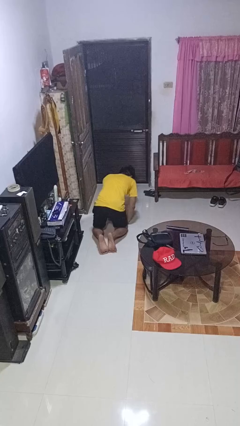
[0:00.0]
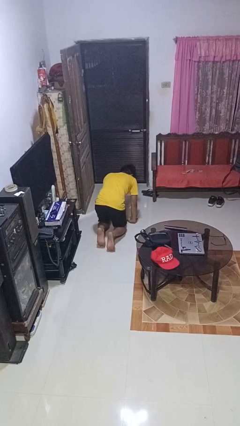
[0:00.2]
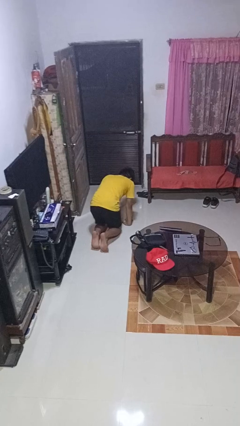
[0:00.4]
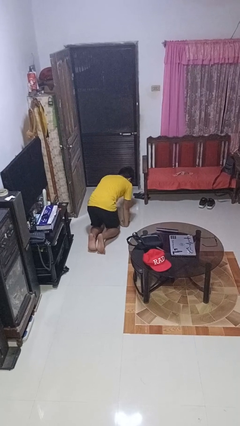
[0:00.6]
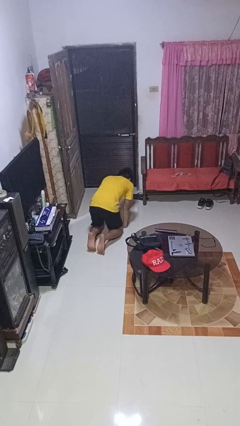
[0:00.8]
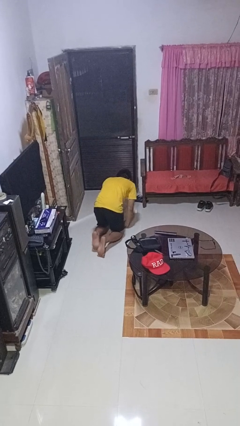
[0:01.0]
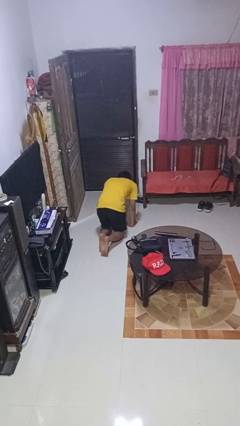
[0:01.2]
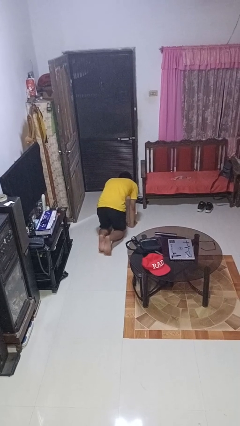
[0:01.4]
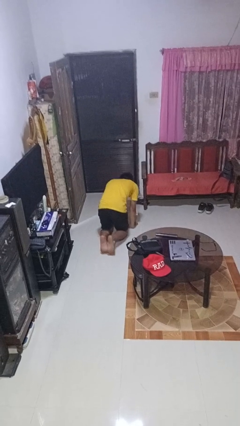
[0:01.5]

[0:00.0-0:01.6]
person crawls

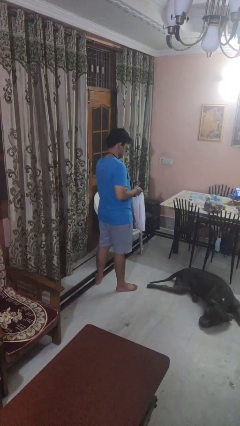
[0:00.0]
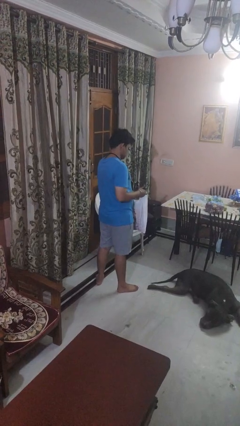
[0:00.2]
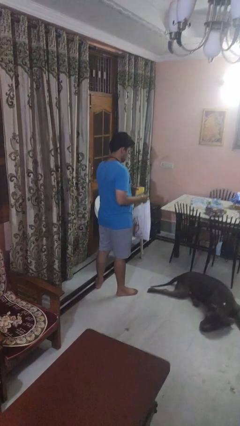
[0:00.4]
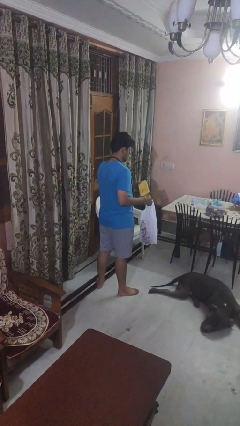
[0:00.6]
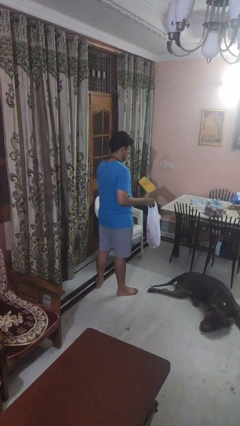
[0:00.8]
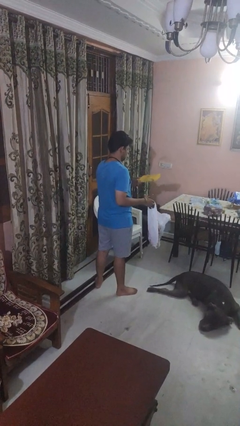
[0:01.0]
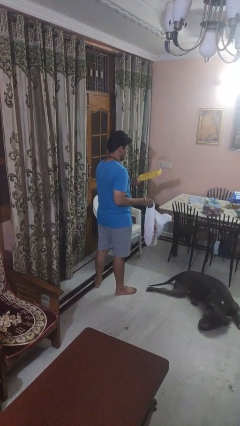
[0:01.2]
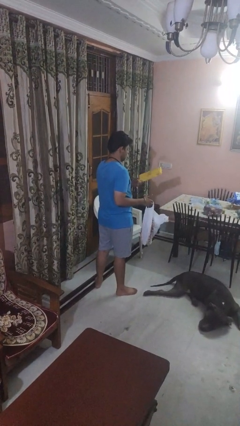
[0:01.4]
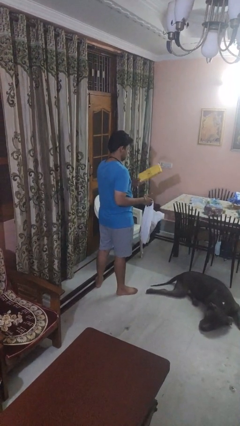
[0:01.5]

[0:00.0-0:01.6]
person takes object from bag

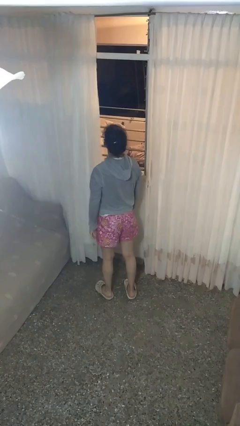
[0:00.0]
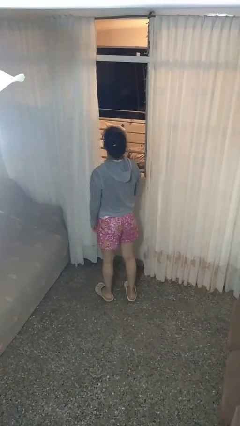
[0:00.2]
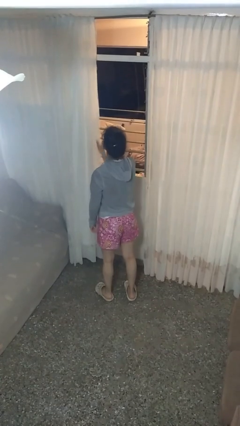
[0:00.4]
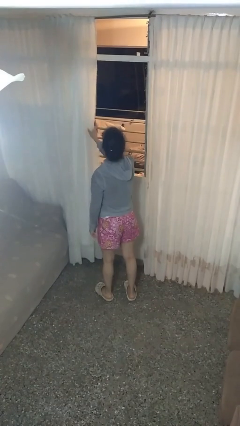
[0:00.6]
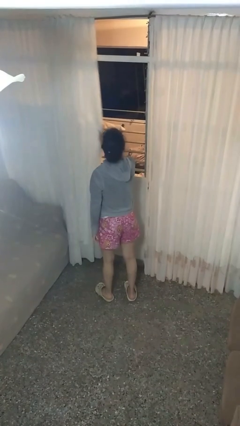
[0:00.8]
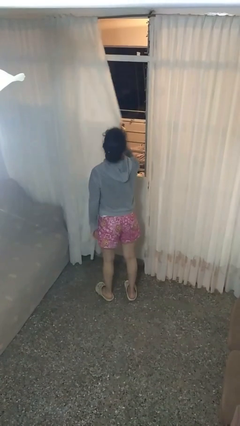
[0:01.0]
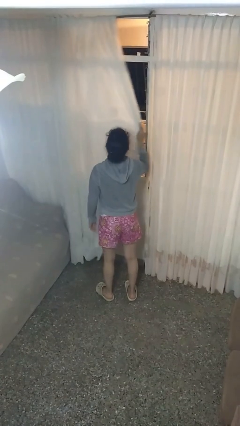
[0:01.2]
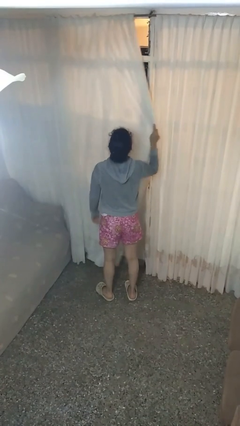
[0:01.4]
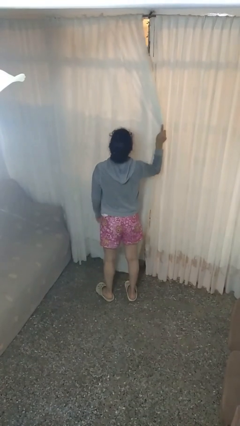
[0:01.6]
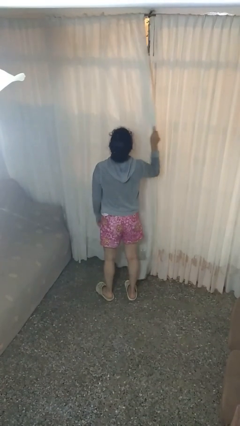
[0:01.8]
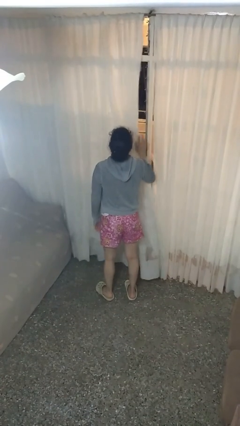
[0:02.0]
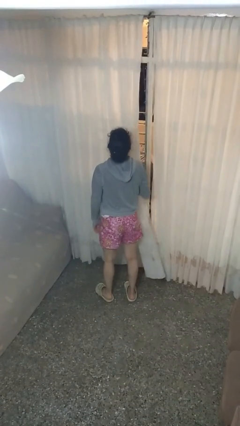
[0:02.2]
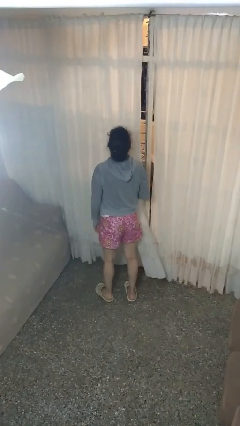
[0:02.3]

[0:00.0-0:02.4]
person closes curtains

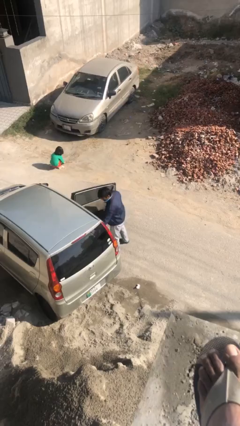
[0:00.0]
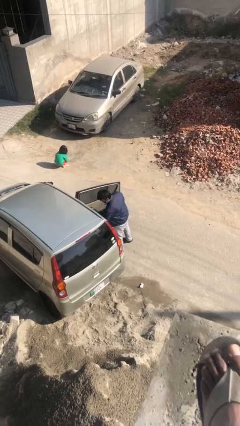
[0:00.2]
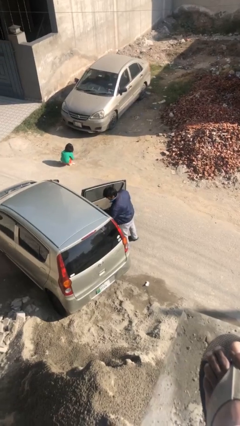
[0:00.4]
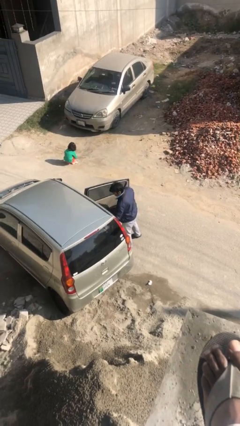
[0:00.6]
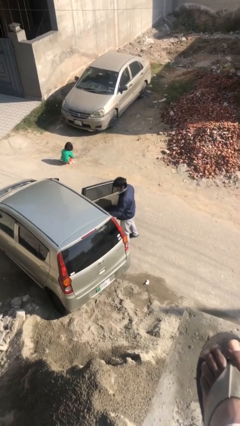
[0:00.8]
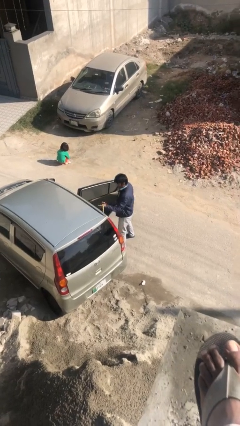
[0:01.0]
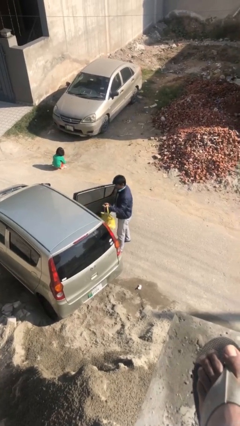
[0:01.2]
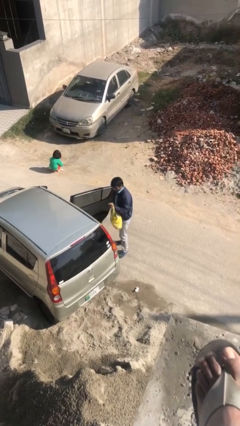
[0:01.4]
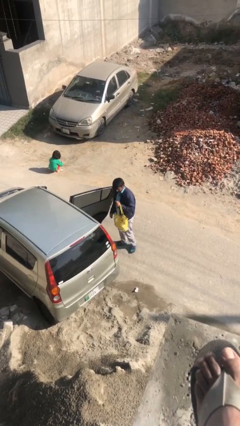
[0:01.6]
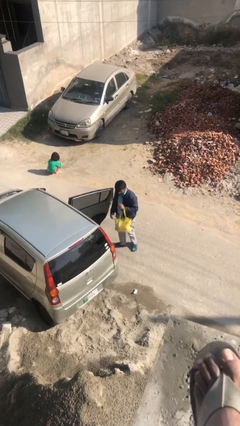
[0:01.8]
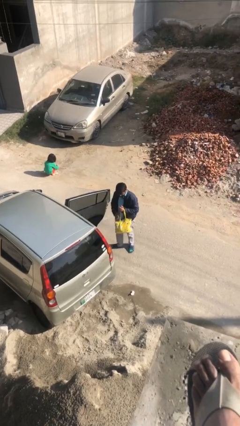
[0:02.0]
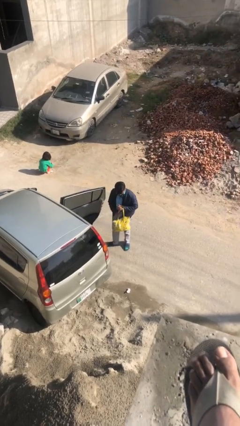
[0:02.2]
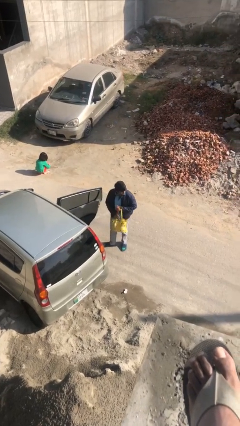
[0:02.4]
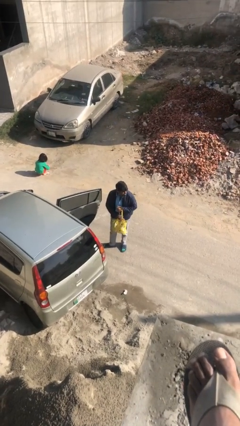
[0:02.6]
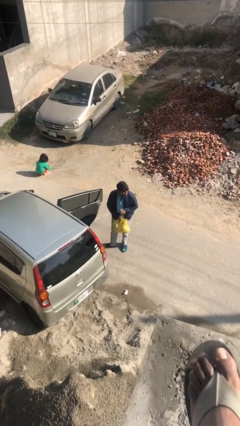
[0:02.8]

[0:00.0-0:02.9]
person unloads car

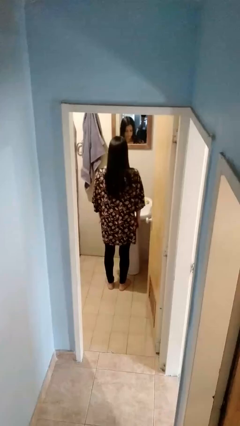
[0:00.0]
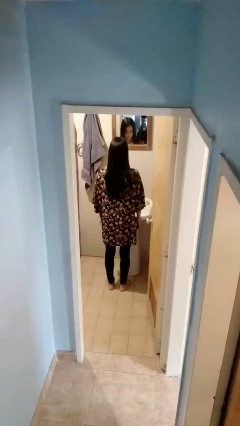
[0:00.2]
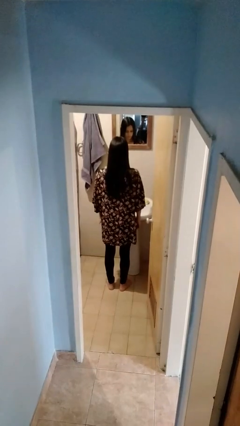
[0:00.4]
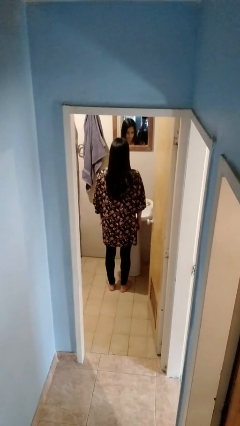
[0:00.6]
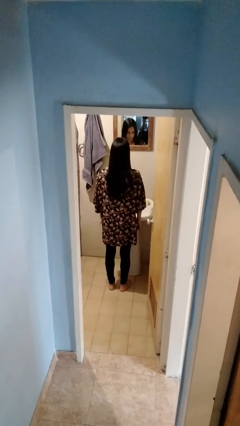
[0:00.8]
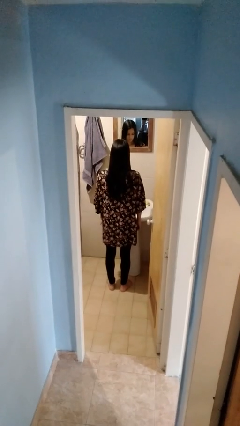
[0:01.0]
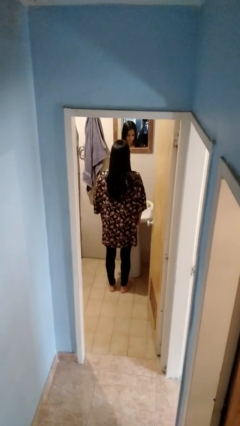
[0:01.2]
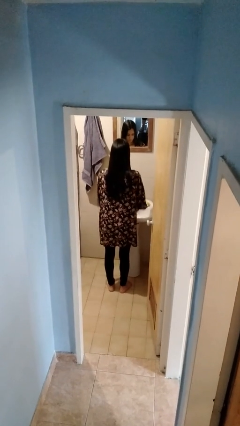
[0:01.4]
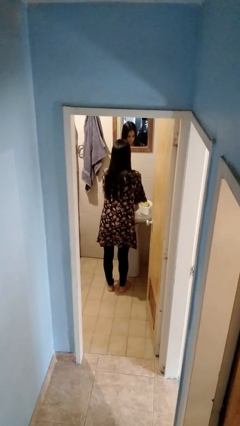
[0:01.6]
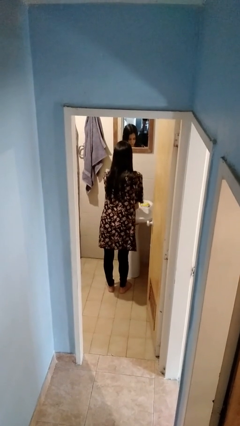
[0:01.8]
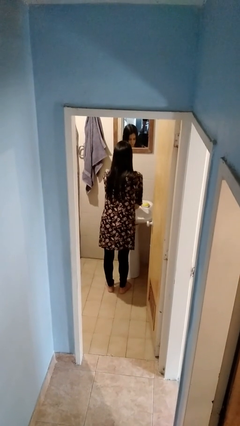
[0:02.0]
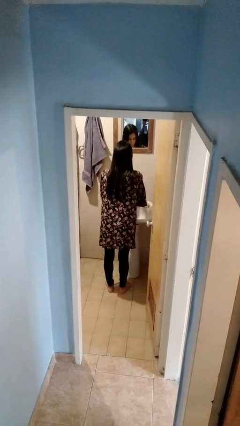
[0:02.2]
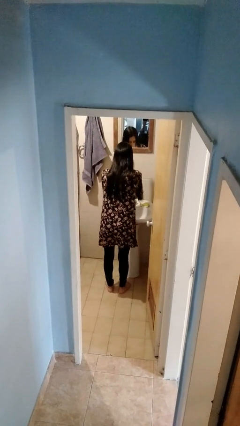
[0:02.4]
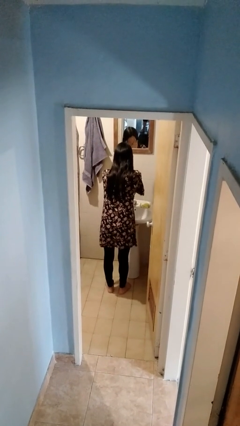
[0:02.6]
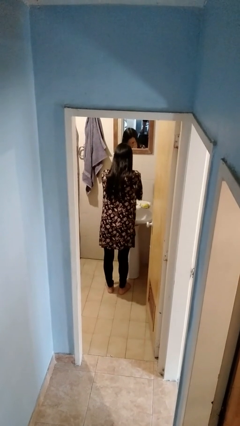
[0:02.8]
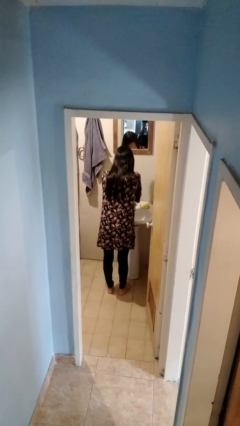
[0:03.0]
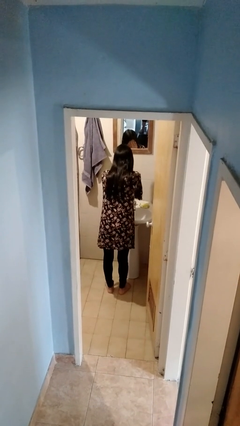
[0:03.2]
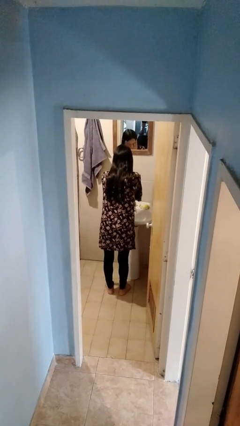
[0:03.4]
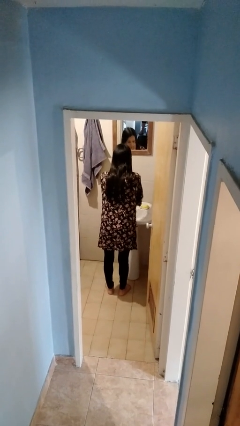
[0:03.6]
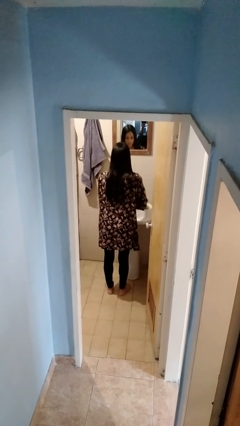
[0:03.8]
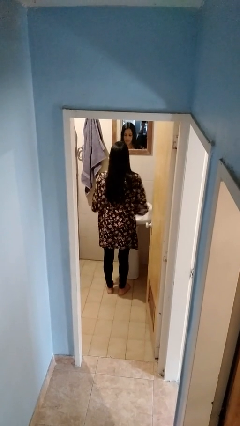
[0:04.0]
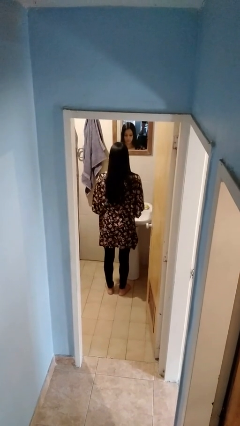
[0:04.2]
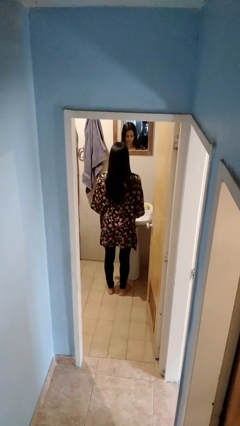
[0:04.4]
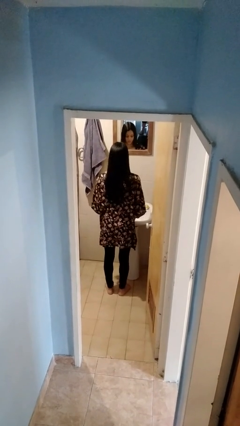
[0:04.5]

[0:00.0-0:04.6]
person washes face

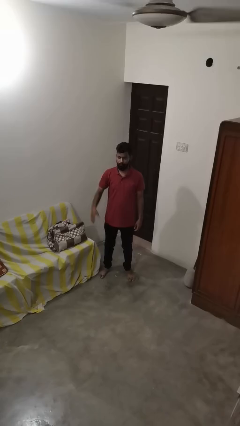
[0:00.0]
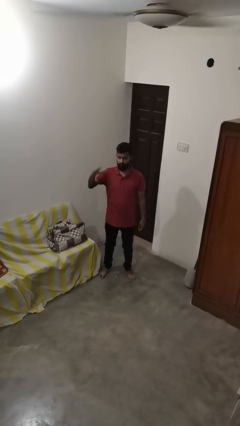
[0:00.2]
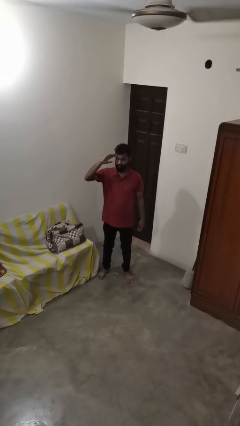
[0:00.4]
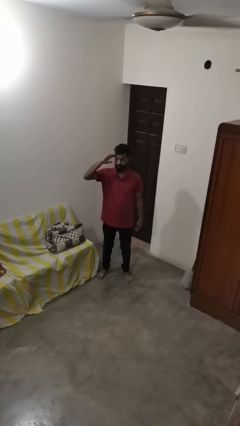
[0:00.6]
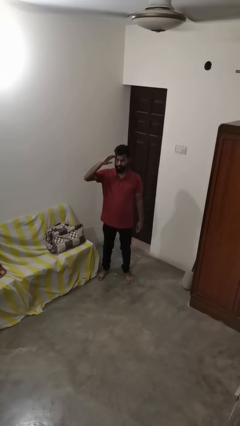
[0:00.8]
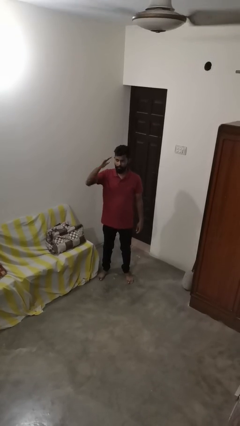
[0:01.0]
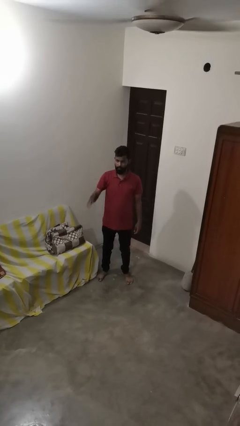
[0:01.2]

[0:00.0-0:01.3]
person salutes

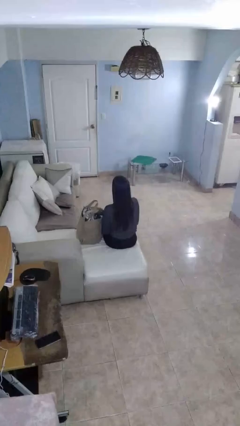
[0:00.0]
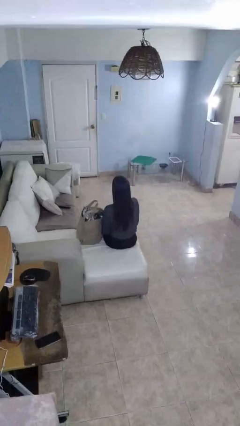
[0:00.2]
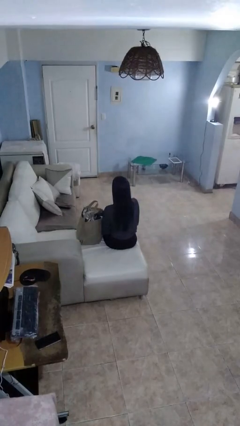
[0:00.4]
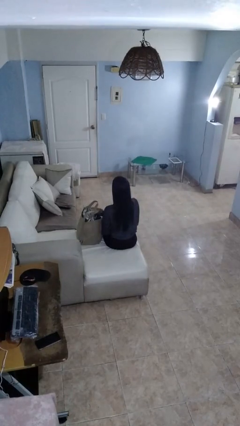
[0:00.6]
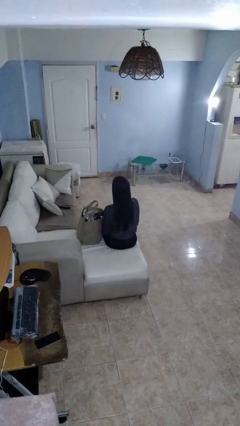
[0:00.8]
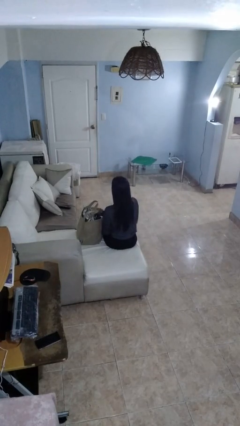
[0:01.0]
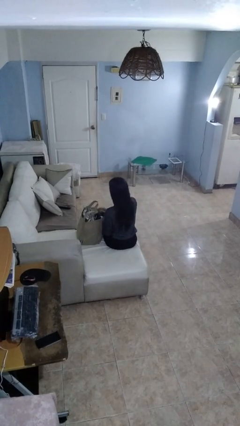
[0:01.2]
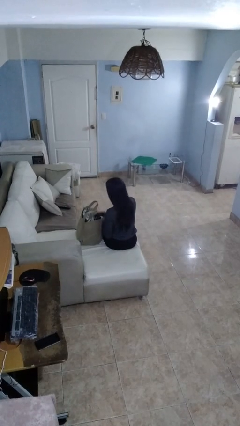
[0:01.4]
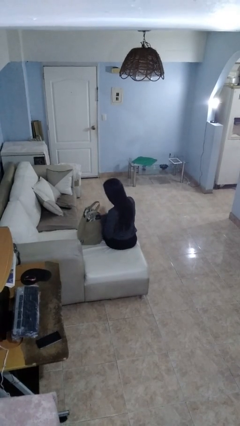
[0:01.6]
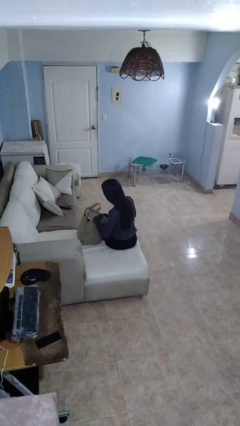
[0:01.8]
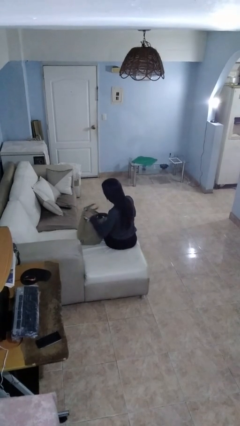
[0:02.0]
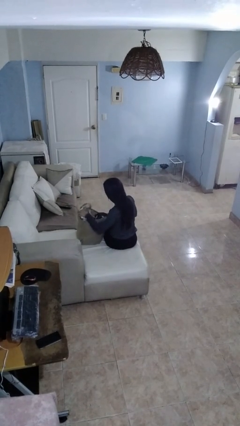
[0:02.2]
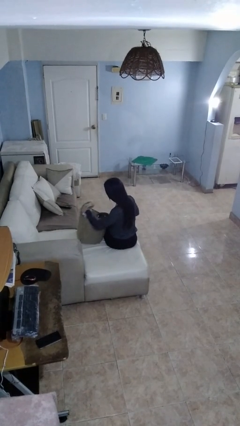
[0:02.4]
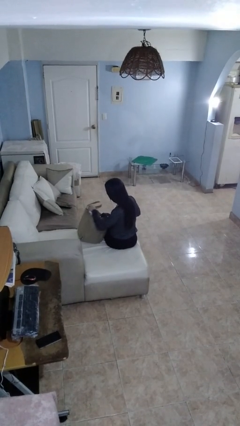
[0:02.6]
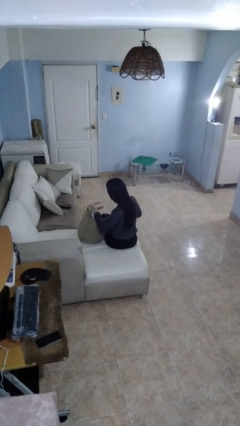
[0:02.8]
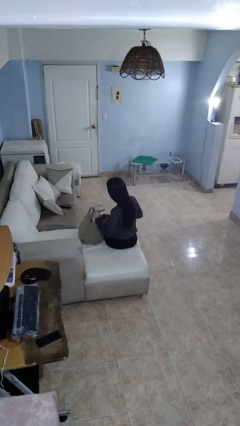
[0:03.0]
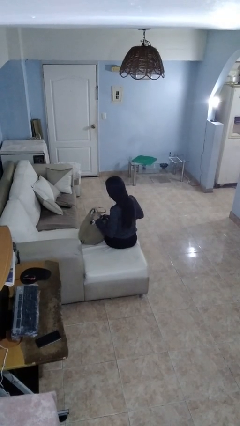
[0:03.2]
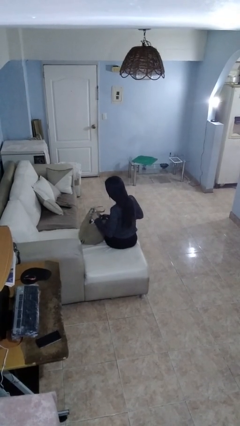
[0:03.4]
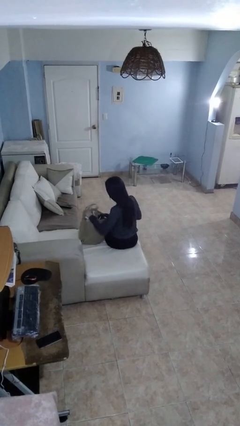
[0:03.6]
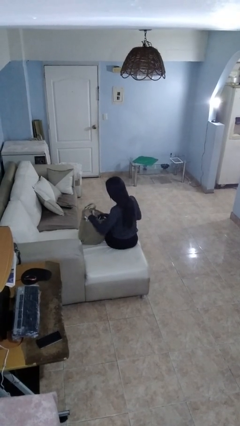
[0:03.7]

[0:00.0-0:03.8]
person searches in bag
